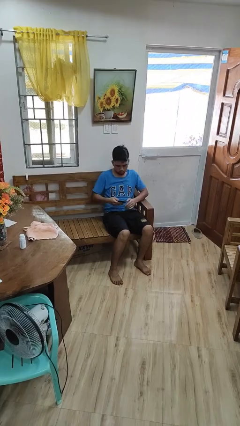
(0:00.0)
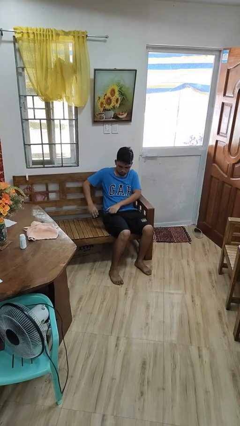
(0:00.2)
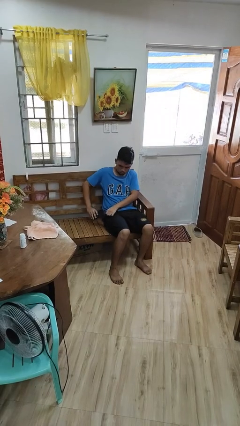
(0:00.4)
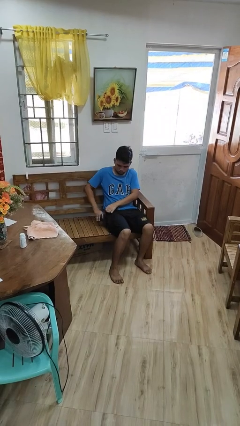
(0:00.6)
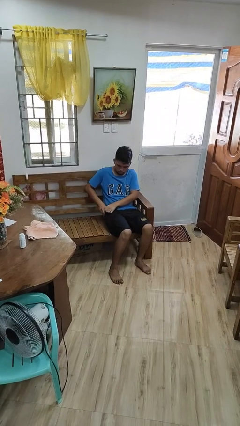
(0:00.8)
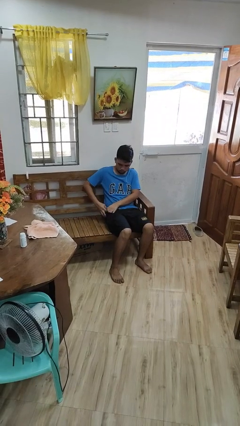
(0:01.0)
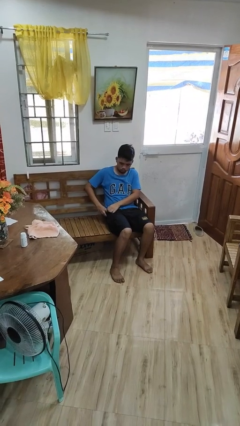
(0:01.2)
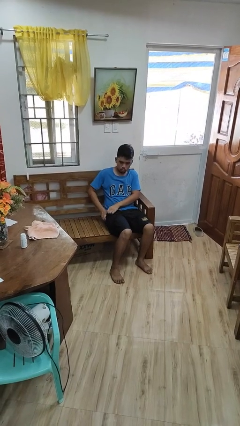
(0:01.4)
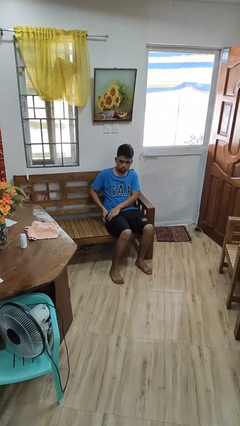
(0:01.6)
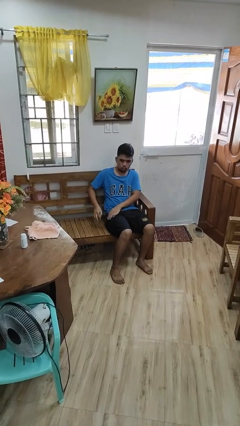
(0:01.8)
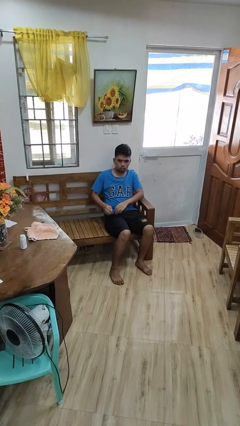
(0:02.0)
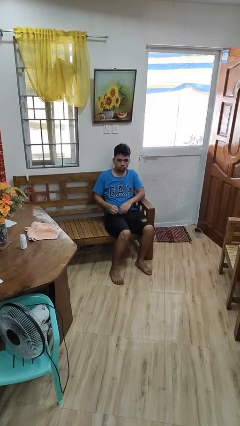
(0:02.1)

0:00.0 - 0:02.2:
person puts phone into pocket

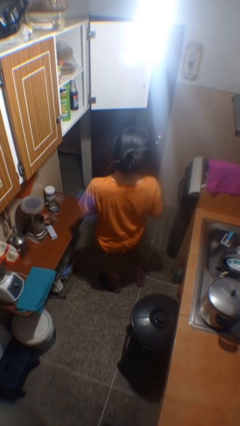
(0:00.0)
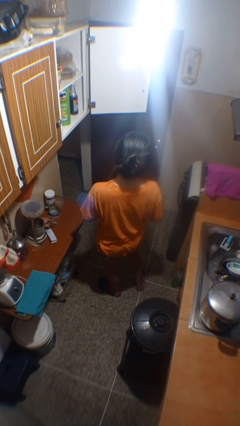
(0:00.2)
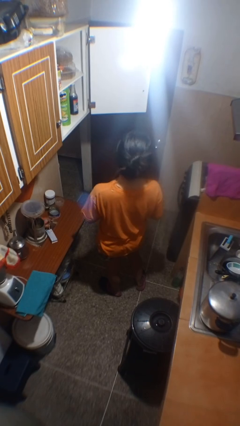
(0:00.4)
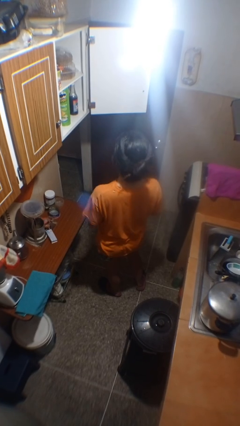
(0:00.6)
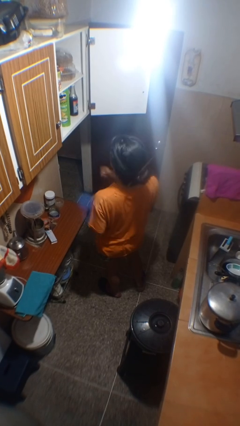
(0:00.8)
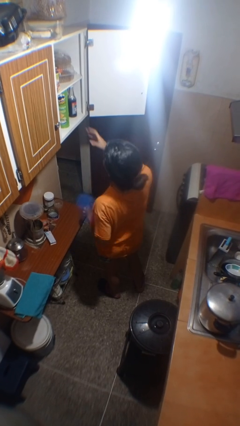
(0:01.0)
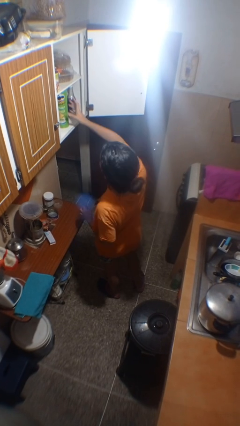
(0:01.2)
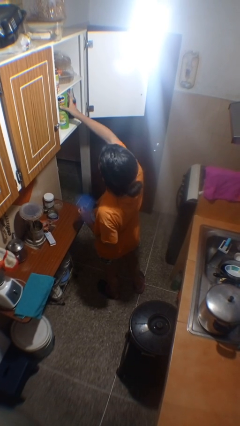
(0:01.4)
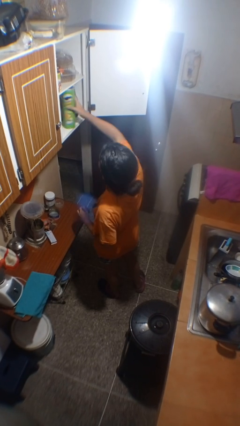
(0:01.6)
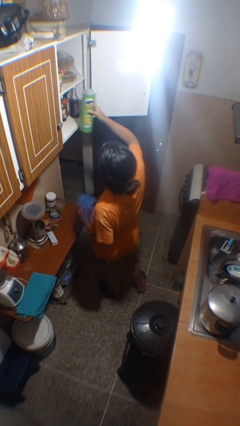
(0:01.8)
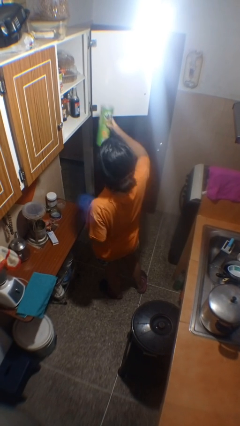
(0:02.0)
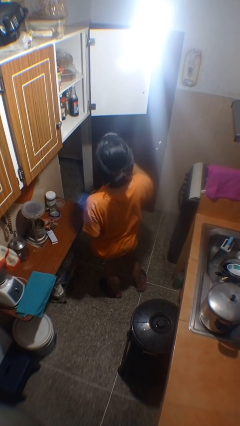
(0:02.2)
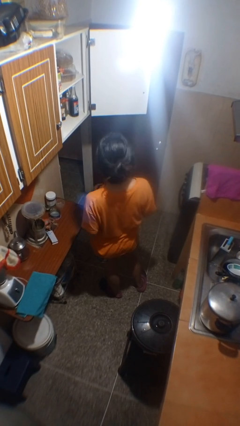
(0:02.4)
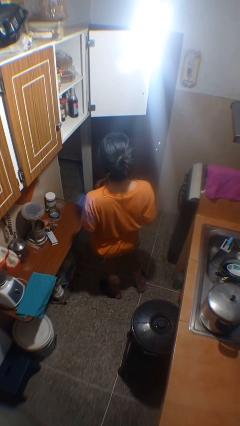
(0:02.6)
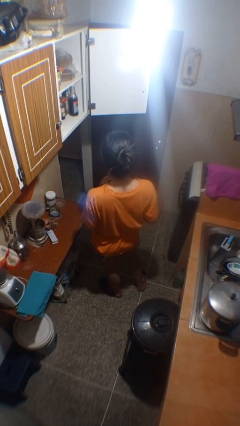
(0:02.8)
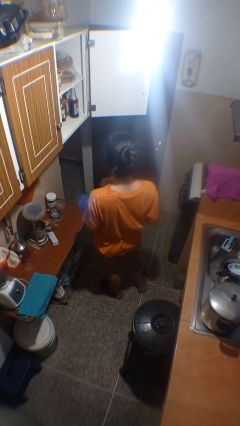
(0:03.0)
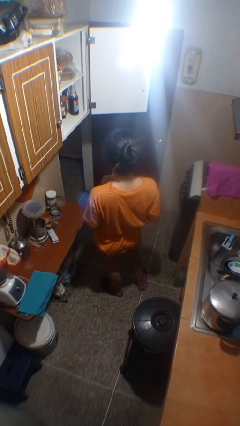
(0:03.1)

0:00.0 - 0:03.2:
person takes object from cabinet

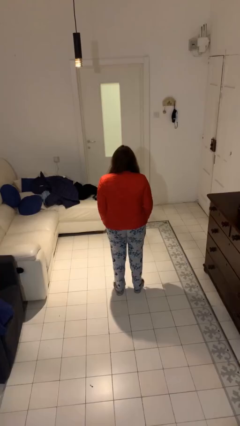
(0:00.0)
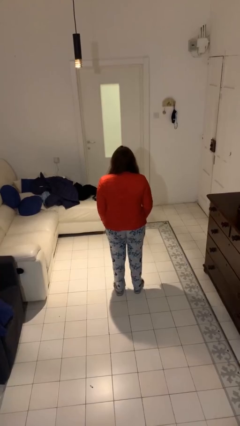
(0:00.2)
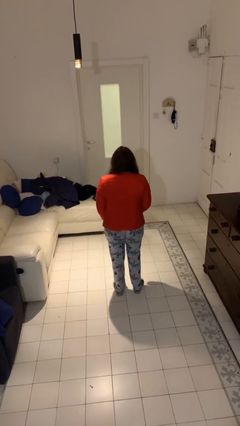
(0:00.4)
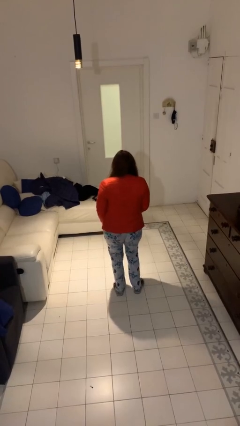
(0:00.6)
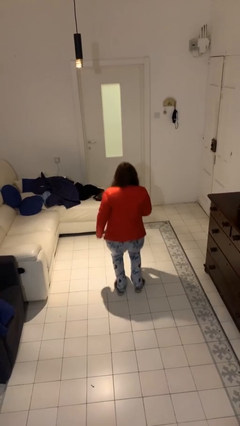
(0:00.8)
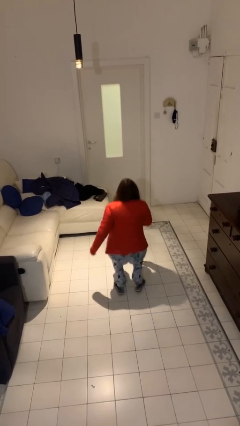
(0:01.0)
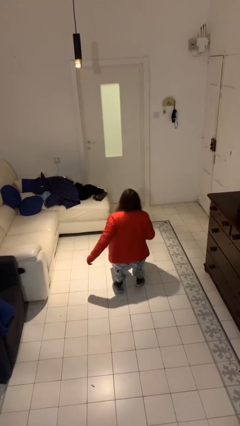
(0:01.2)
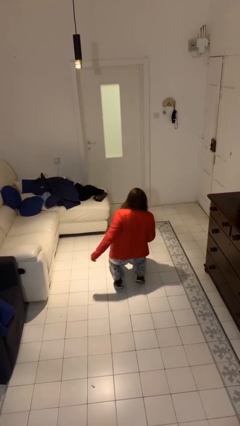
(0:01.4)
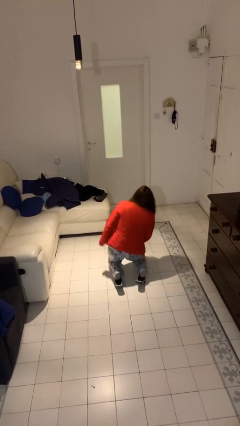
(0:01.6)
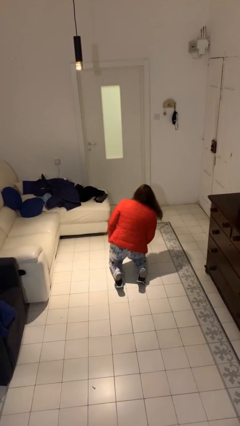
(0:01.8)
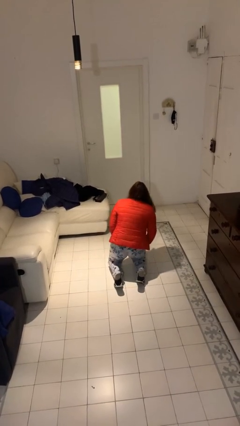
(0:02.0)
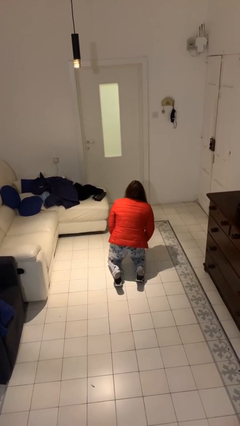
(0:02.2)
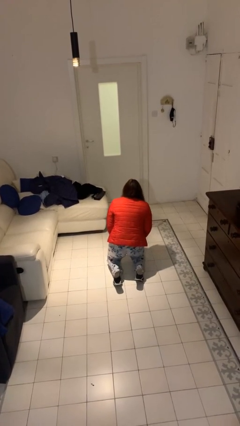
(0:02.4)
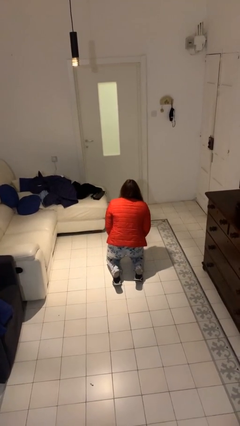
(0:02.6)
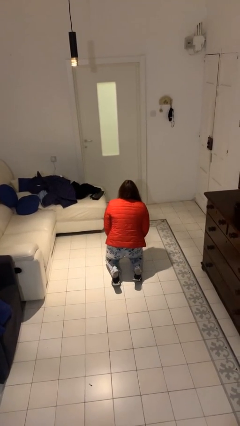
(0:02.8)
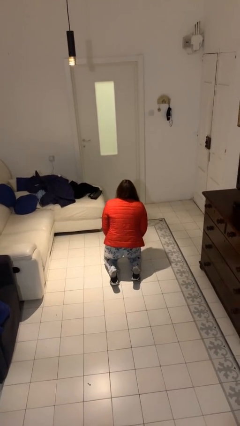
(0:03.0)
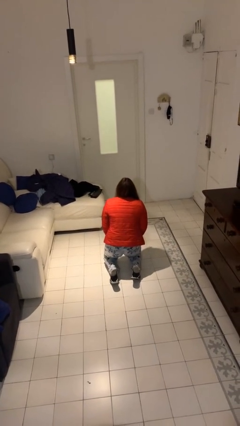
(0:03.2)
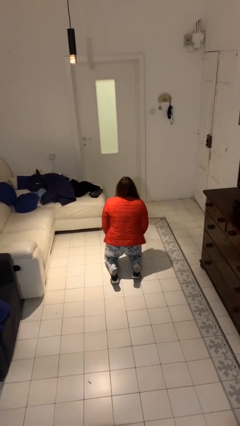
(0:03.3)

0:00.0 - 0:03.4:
person falls while standing

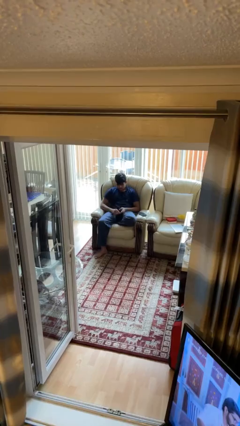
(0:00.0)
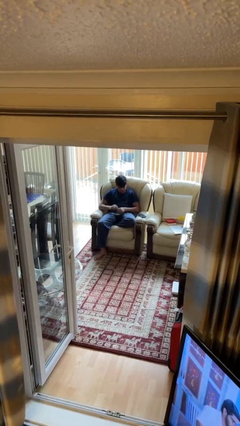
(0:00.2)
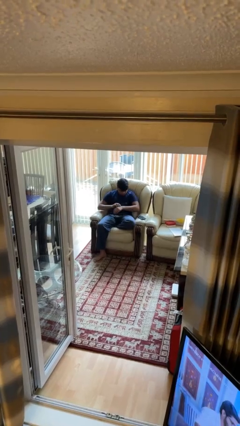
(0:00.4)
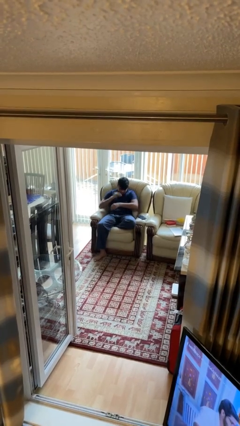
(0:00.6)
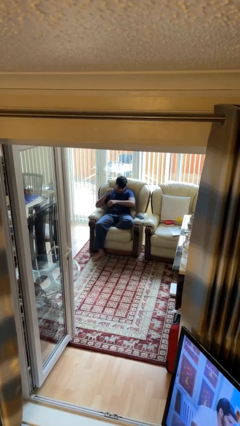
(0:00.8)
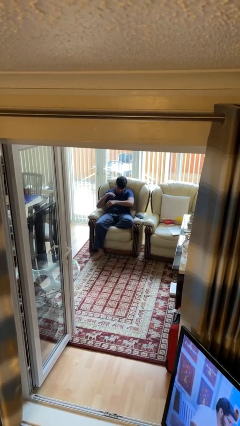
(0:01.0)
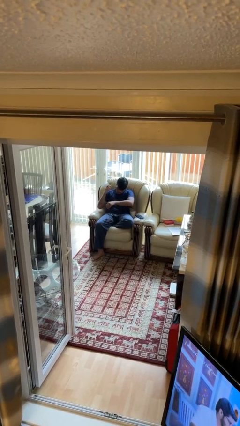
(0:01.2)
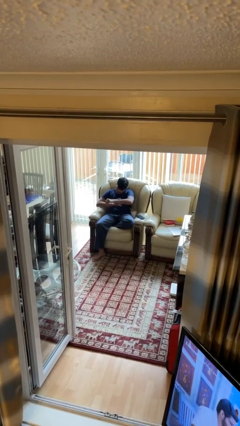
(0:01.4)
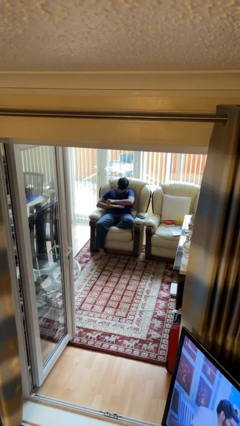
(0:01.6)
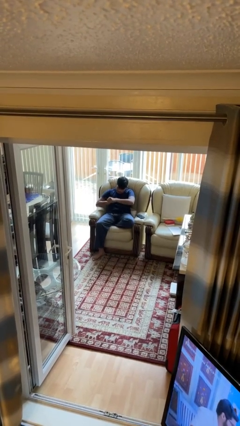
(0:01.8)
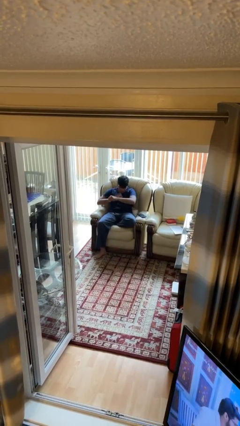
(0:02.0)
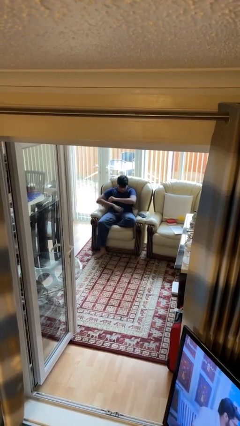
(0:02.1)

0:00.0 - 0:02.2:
person swats bug

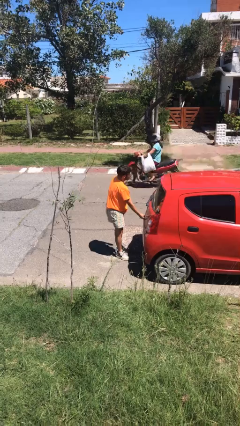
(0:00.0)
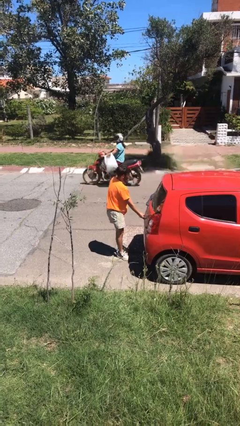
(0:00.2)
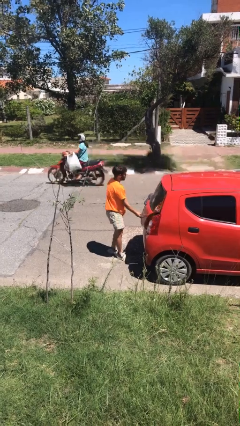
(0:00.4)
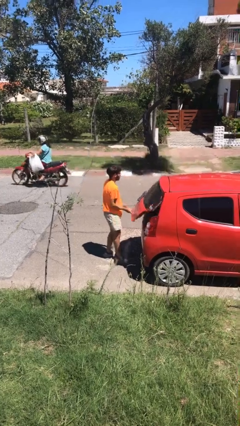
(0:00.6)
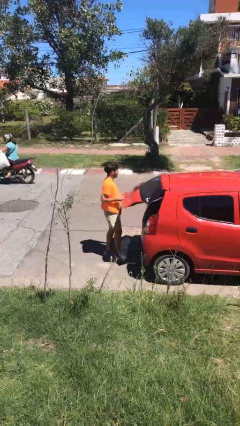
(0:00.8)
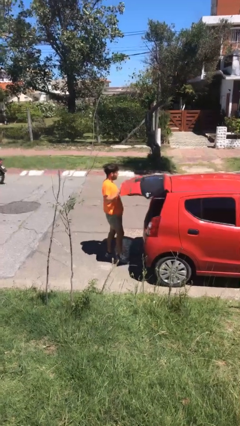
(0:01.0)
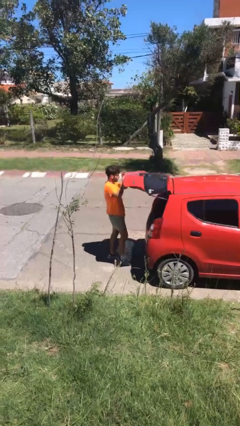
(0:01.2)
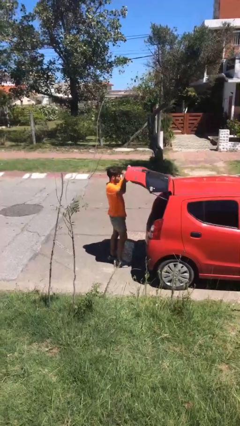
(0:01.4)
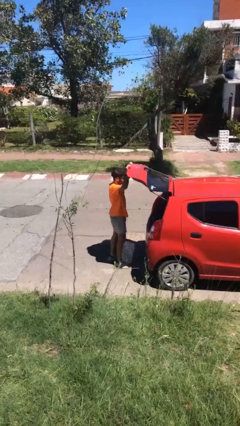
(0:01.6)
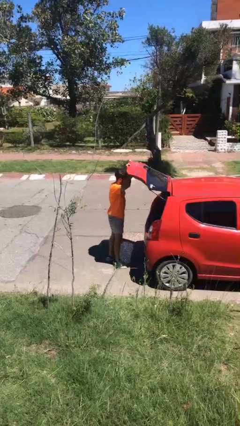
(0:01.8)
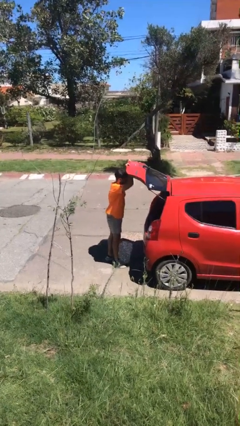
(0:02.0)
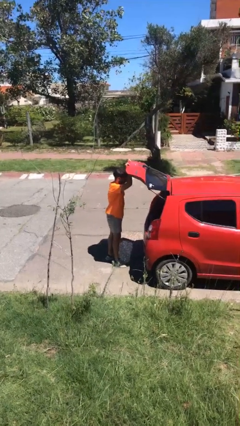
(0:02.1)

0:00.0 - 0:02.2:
person opens car trunk

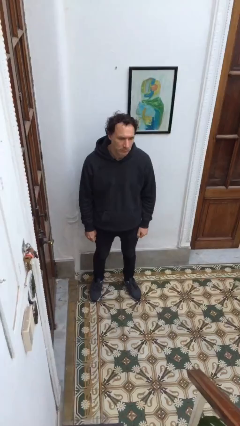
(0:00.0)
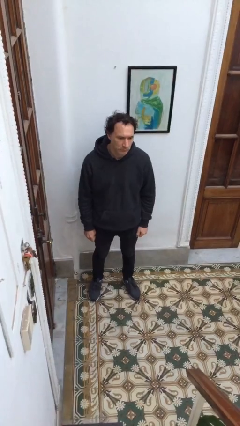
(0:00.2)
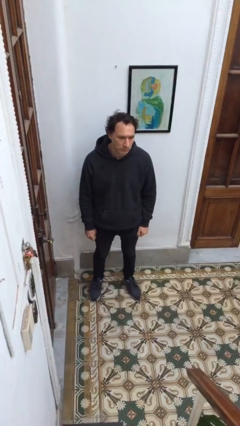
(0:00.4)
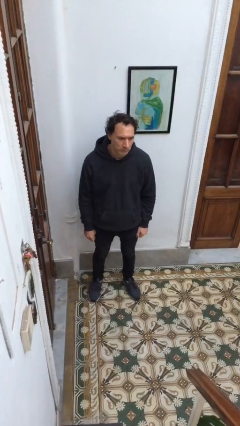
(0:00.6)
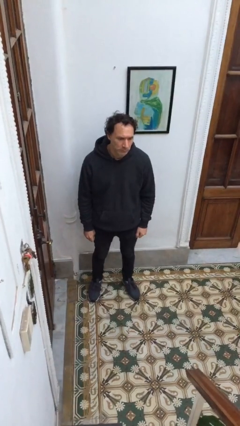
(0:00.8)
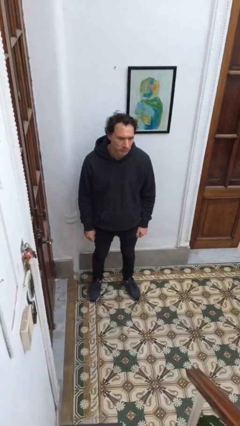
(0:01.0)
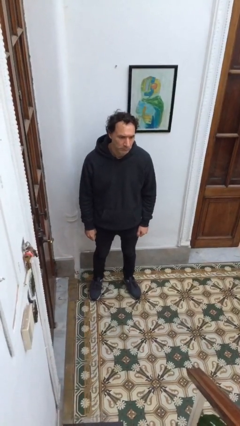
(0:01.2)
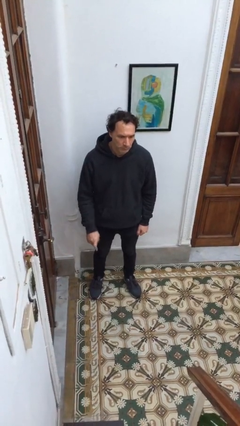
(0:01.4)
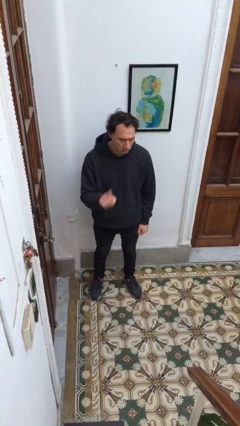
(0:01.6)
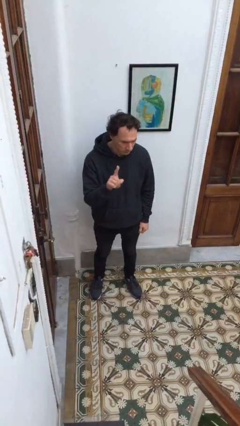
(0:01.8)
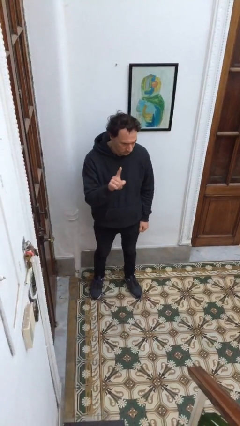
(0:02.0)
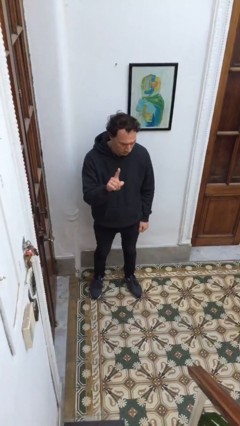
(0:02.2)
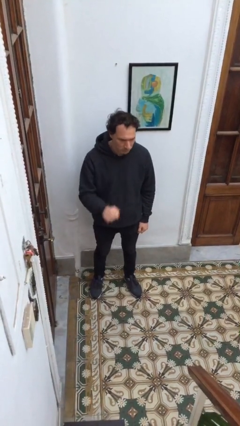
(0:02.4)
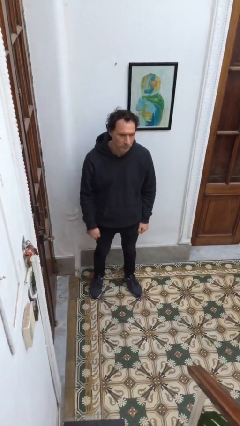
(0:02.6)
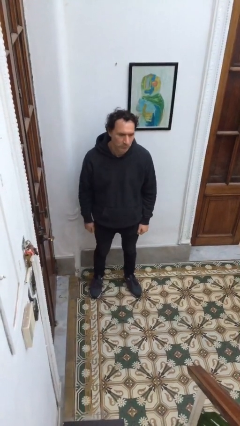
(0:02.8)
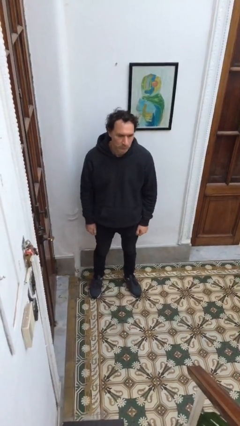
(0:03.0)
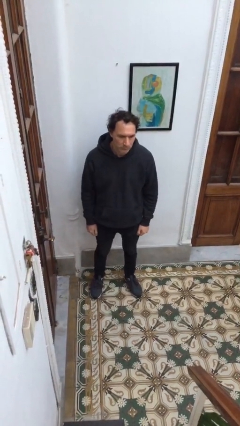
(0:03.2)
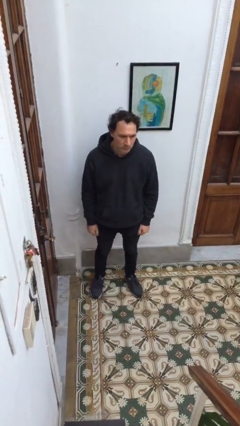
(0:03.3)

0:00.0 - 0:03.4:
person gestures number one

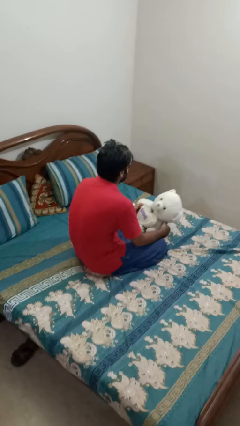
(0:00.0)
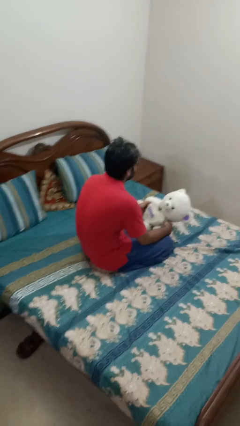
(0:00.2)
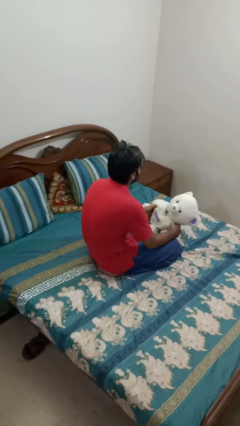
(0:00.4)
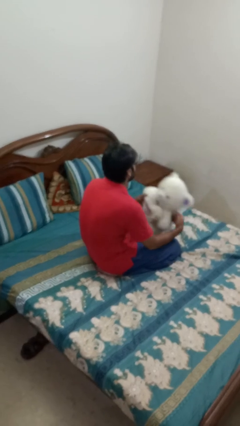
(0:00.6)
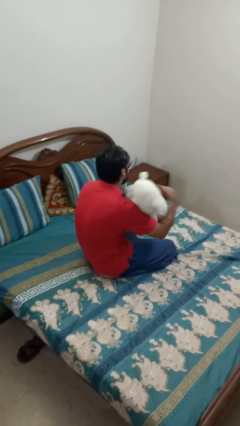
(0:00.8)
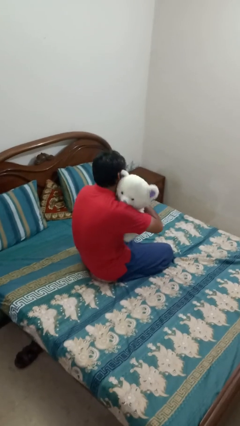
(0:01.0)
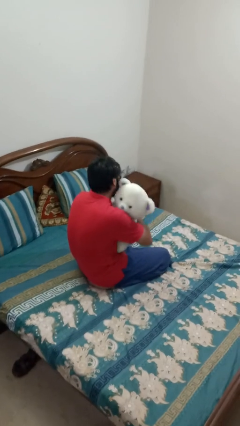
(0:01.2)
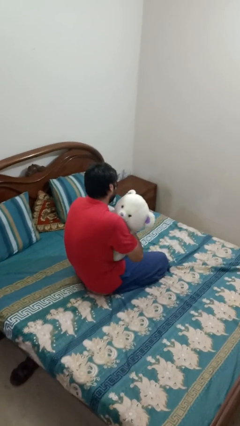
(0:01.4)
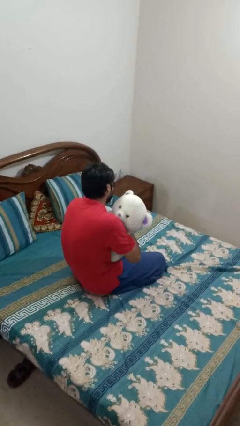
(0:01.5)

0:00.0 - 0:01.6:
person hugs stuffed animal
